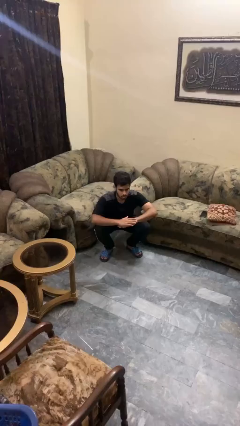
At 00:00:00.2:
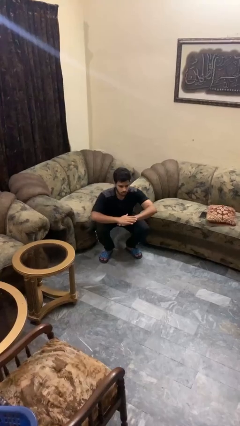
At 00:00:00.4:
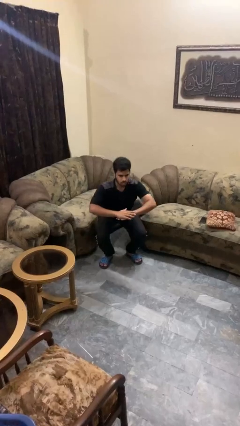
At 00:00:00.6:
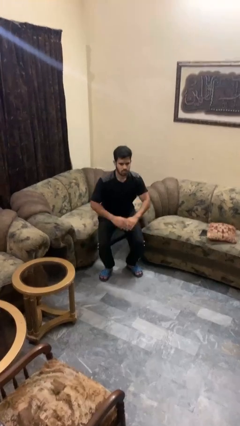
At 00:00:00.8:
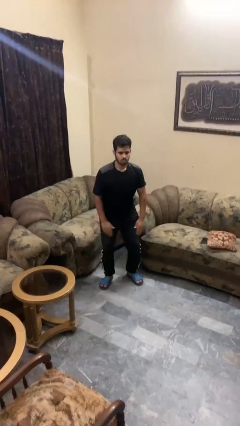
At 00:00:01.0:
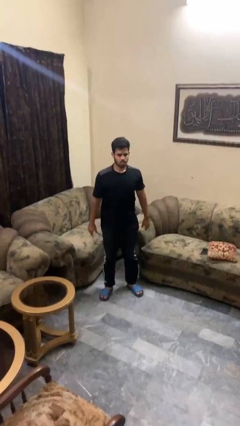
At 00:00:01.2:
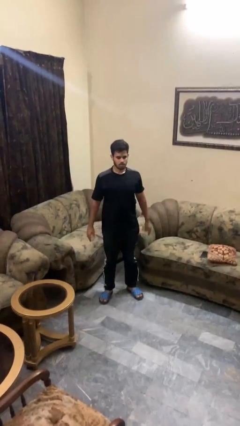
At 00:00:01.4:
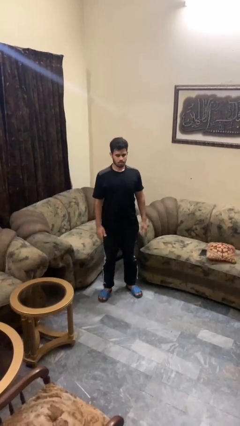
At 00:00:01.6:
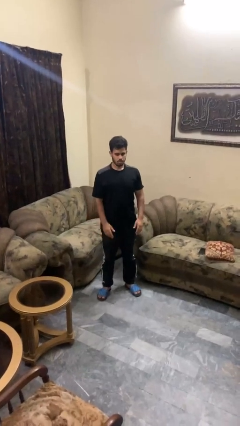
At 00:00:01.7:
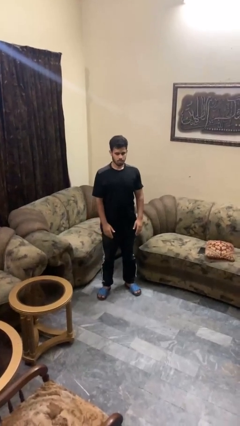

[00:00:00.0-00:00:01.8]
person stands up

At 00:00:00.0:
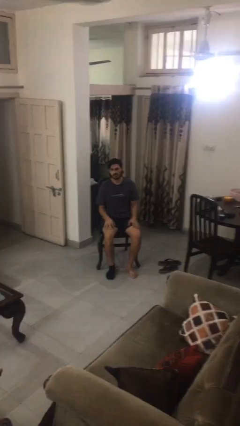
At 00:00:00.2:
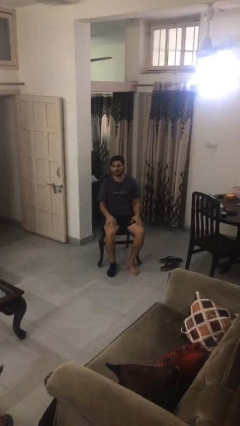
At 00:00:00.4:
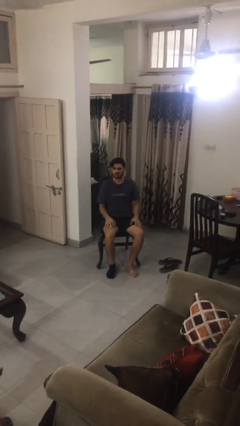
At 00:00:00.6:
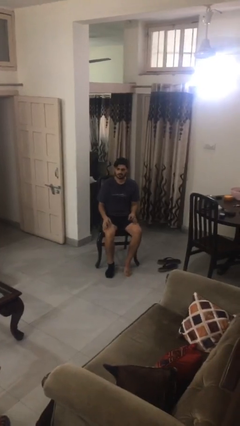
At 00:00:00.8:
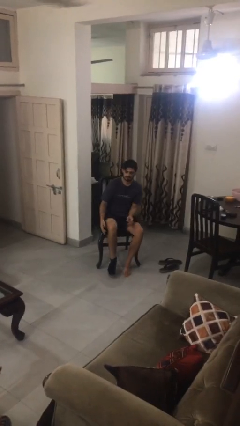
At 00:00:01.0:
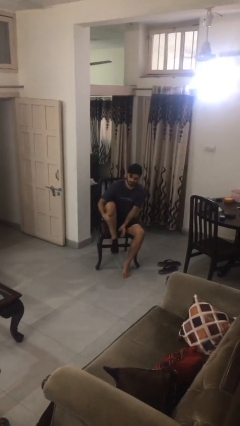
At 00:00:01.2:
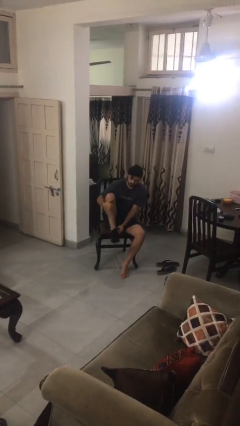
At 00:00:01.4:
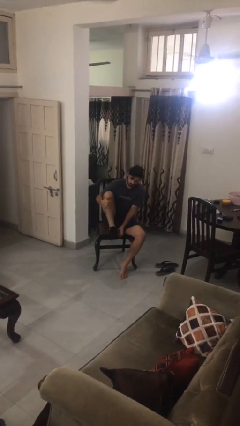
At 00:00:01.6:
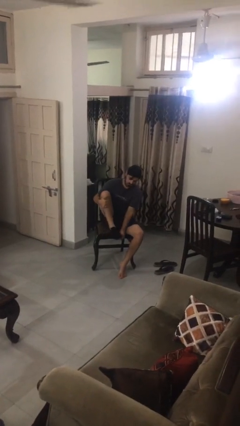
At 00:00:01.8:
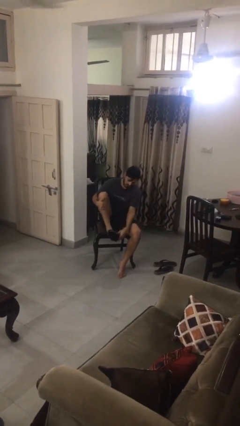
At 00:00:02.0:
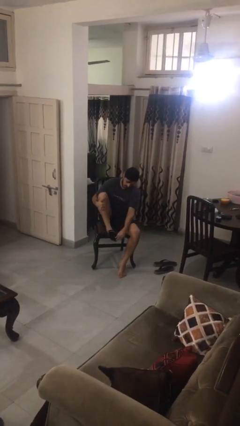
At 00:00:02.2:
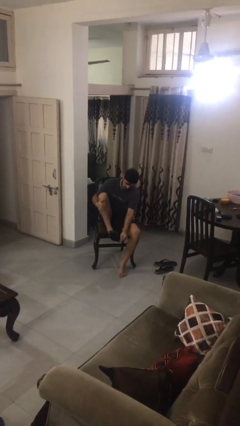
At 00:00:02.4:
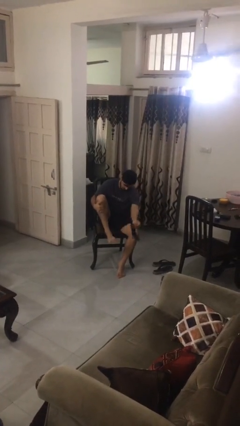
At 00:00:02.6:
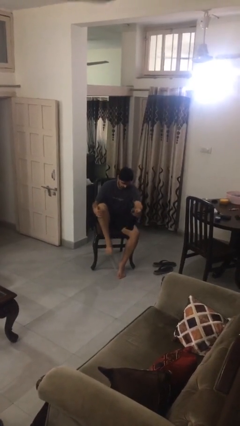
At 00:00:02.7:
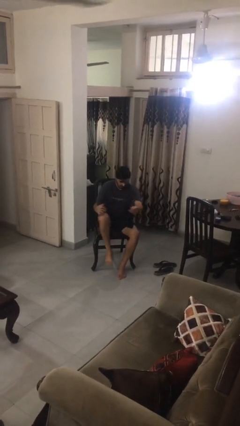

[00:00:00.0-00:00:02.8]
person takes off socks

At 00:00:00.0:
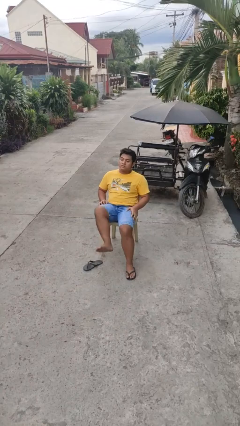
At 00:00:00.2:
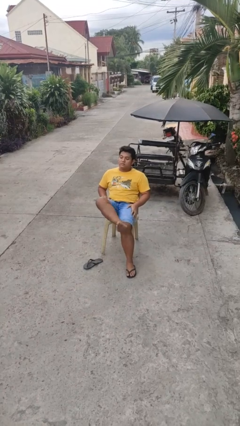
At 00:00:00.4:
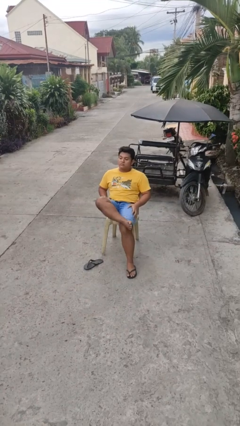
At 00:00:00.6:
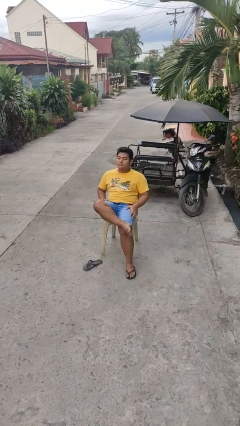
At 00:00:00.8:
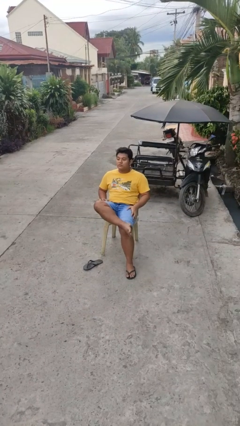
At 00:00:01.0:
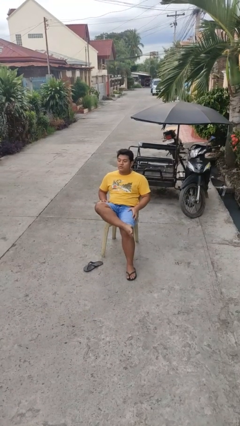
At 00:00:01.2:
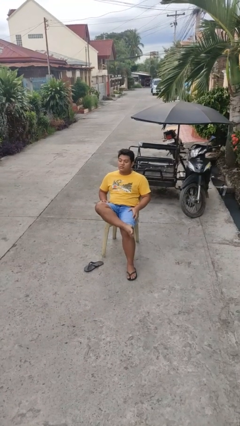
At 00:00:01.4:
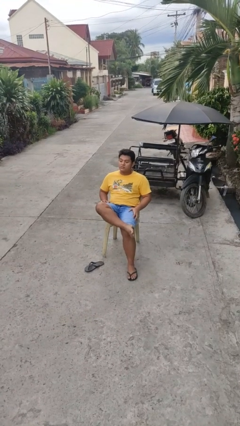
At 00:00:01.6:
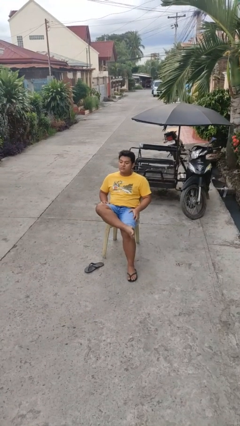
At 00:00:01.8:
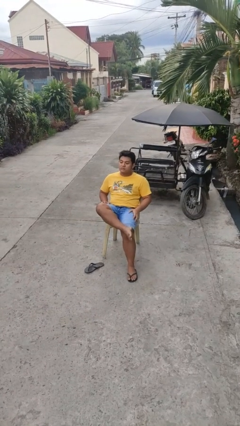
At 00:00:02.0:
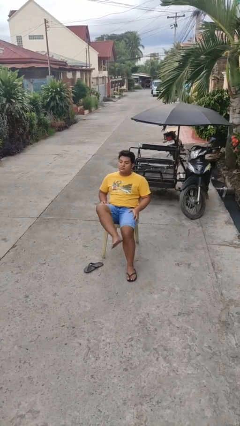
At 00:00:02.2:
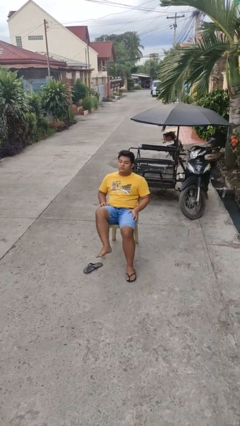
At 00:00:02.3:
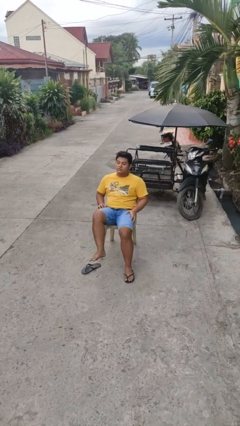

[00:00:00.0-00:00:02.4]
person crosses legs

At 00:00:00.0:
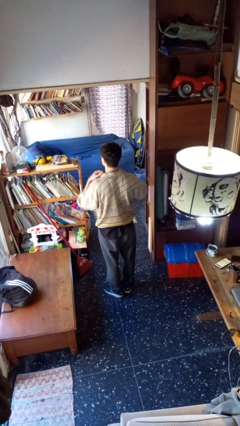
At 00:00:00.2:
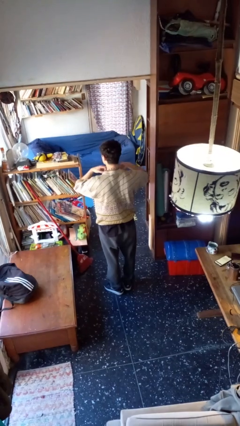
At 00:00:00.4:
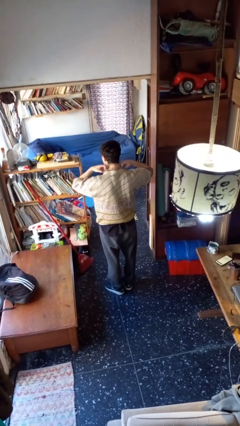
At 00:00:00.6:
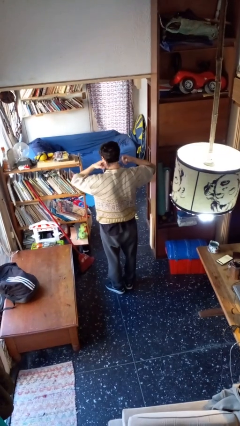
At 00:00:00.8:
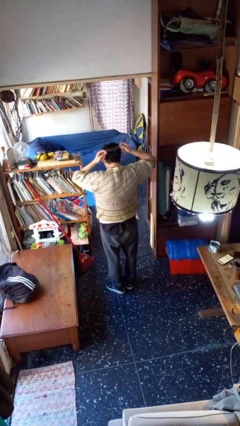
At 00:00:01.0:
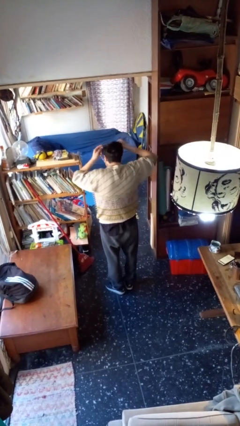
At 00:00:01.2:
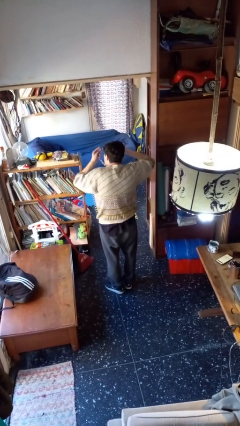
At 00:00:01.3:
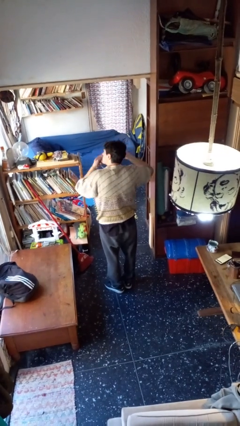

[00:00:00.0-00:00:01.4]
person takes off necklace

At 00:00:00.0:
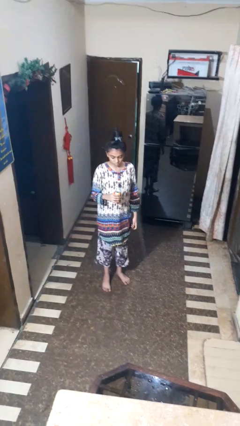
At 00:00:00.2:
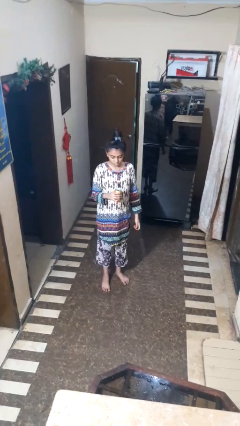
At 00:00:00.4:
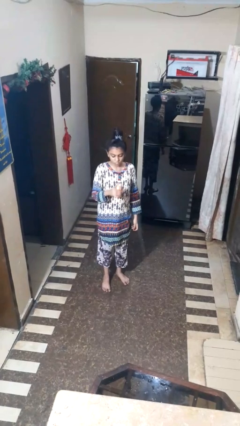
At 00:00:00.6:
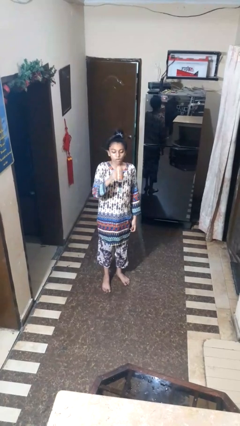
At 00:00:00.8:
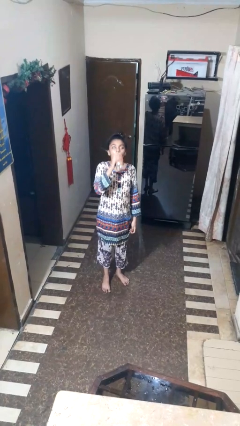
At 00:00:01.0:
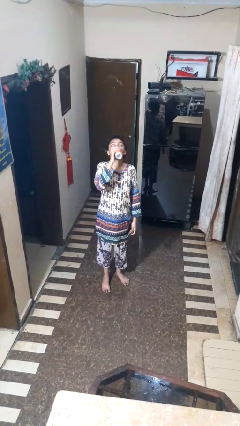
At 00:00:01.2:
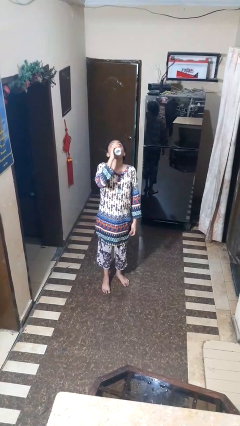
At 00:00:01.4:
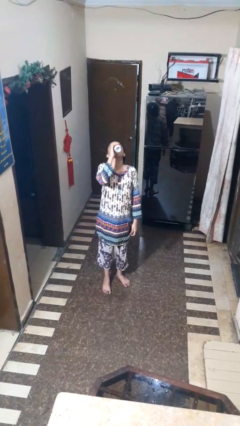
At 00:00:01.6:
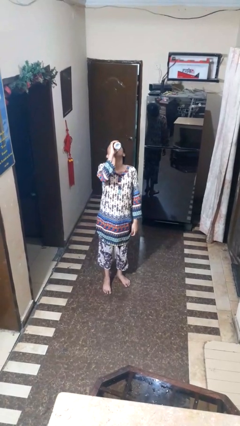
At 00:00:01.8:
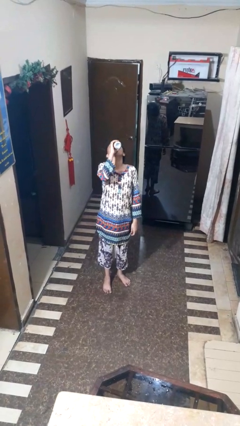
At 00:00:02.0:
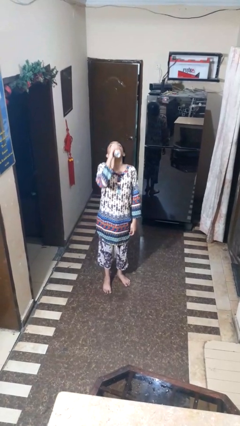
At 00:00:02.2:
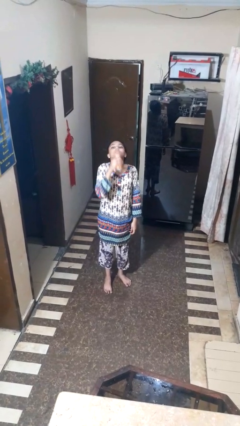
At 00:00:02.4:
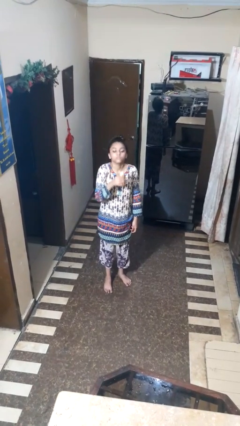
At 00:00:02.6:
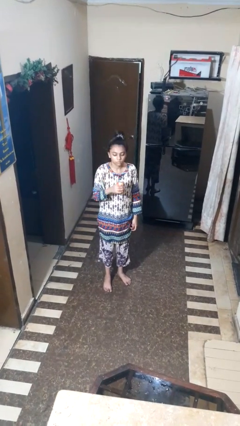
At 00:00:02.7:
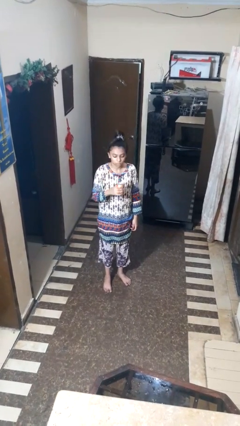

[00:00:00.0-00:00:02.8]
person drinks from beverage can

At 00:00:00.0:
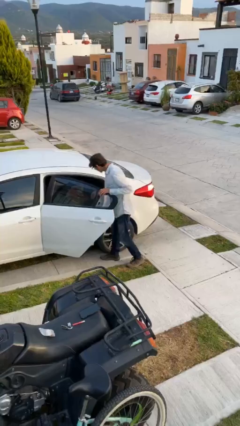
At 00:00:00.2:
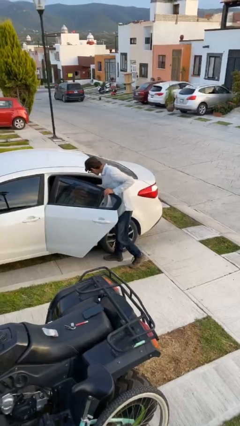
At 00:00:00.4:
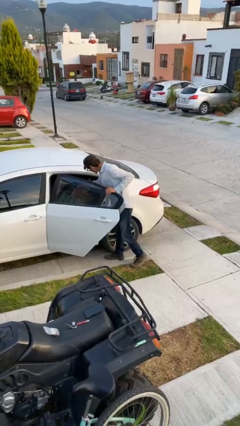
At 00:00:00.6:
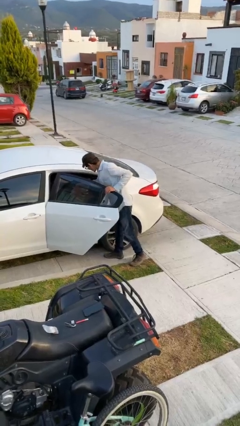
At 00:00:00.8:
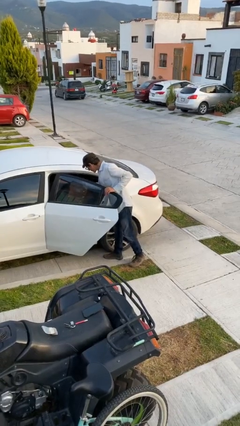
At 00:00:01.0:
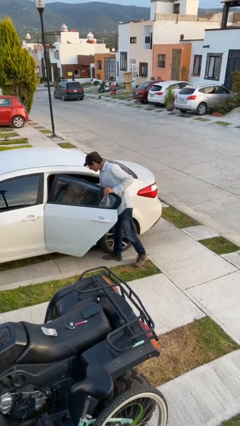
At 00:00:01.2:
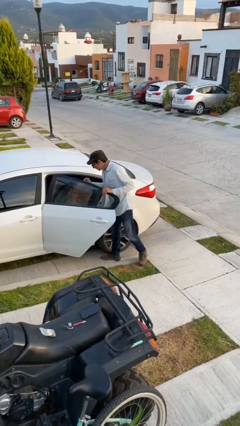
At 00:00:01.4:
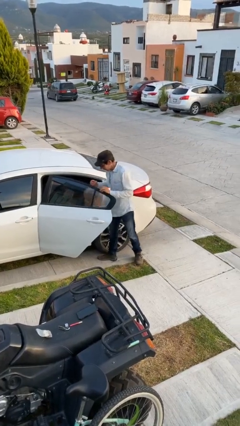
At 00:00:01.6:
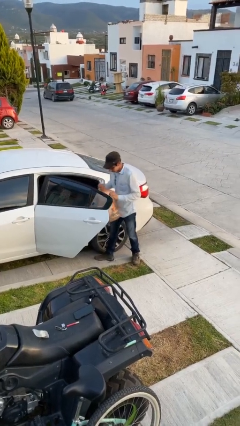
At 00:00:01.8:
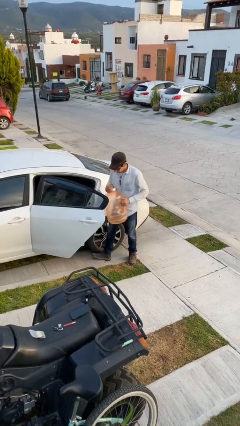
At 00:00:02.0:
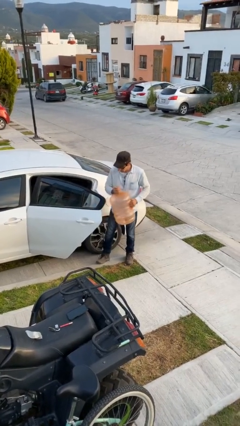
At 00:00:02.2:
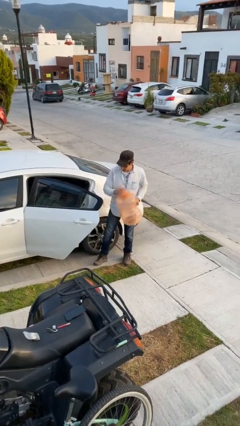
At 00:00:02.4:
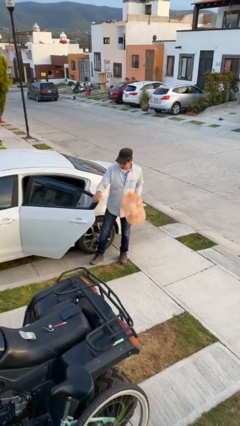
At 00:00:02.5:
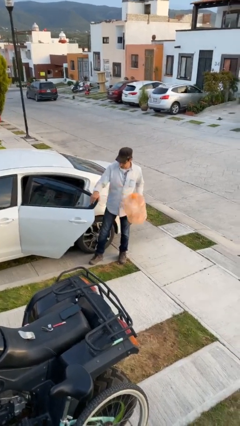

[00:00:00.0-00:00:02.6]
person unloads car

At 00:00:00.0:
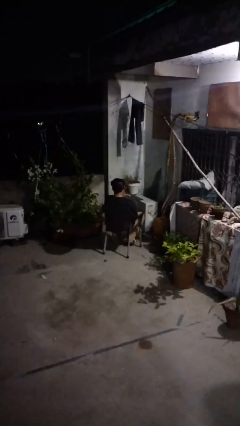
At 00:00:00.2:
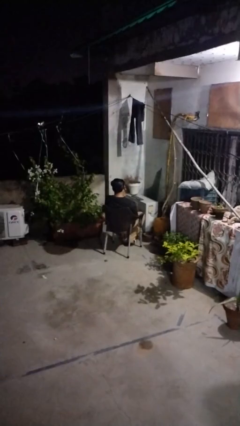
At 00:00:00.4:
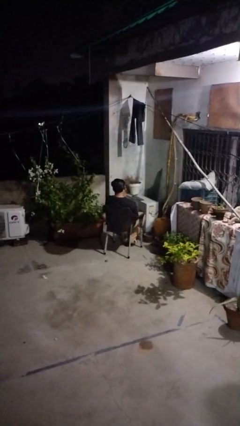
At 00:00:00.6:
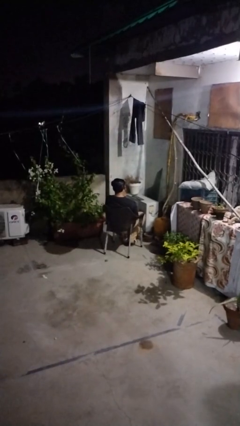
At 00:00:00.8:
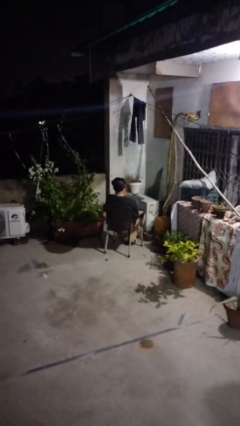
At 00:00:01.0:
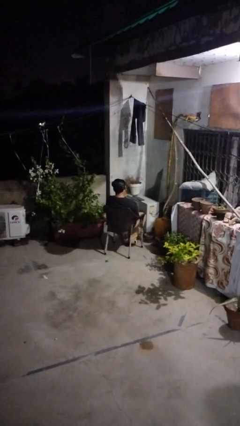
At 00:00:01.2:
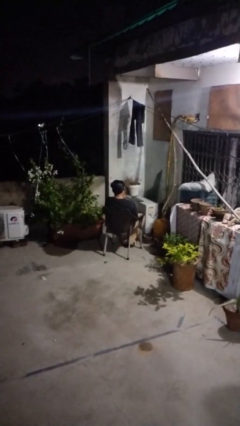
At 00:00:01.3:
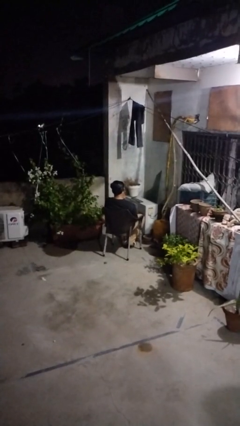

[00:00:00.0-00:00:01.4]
person strokes chin

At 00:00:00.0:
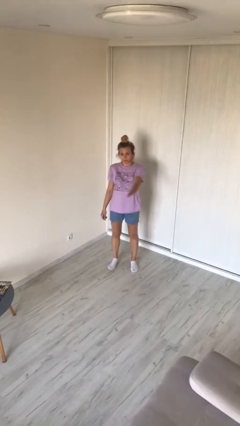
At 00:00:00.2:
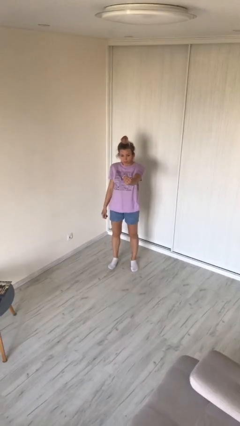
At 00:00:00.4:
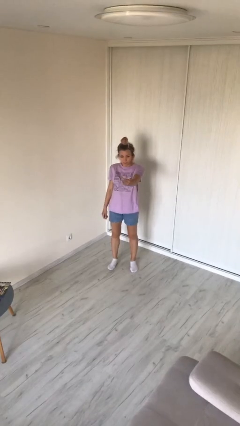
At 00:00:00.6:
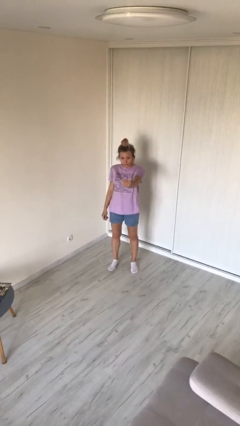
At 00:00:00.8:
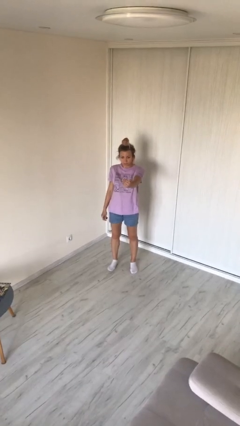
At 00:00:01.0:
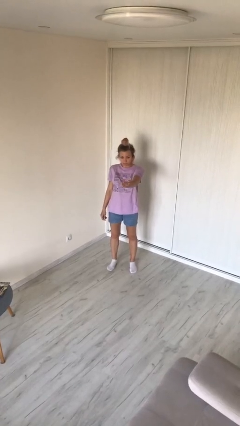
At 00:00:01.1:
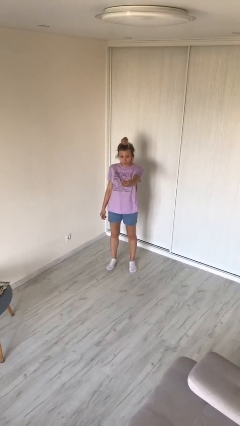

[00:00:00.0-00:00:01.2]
person gestures come here
